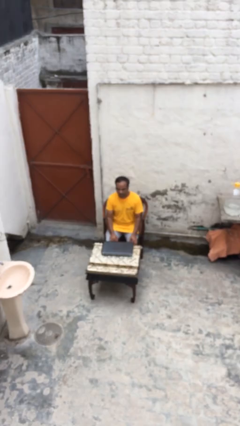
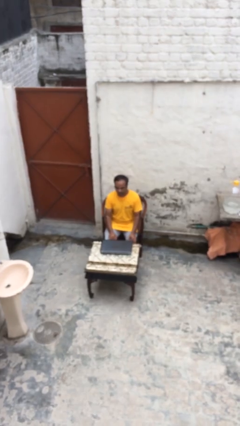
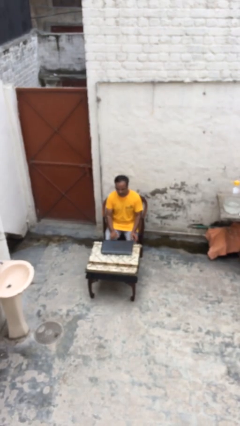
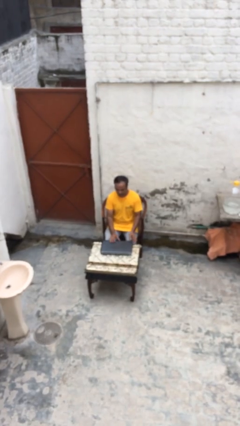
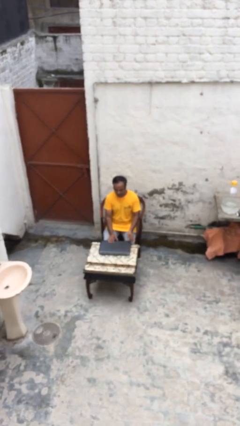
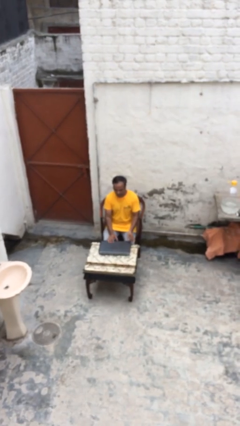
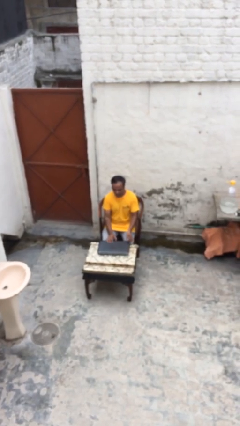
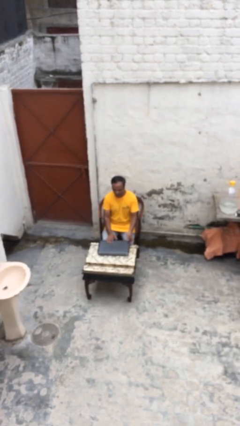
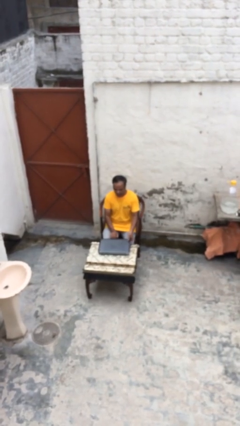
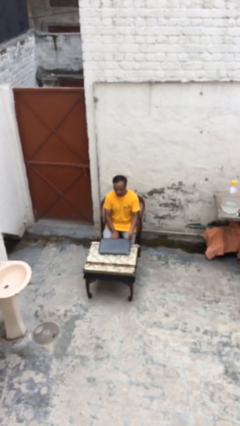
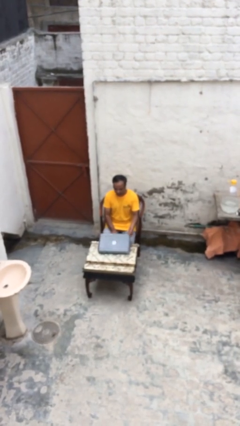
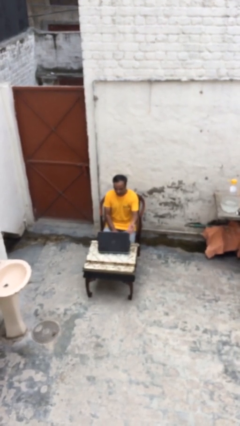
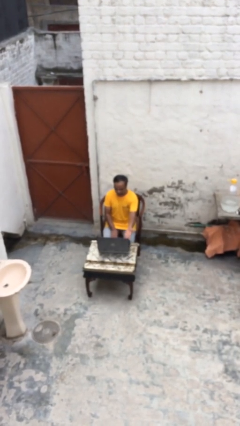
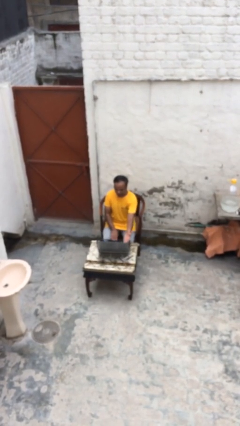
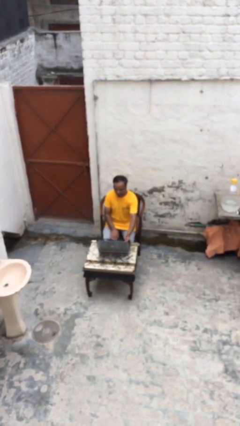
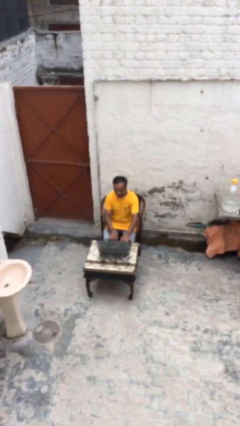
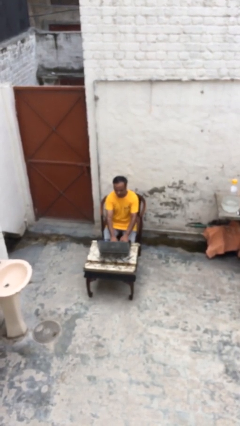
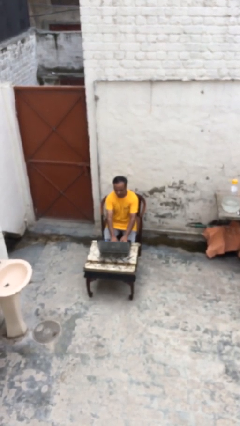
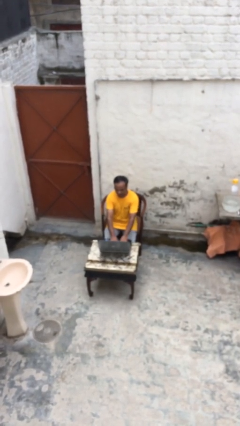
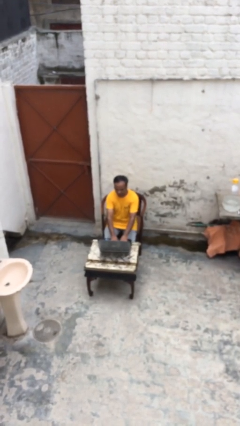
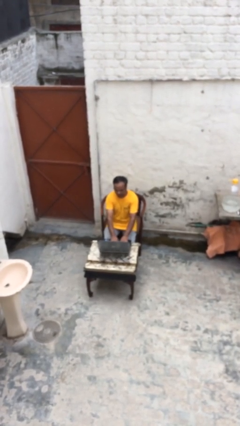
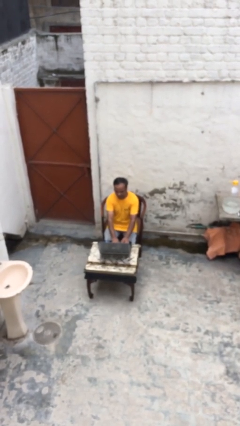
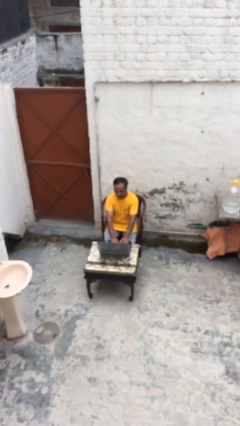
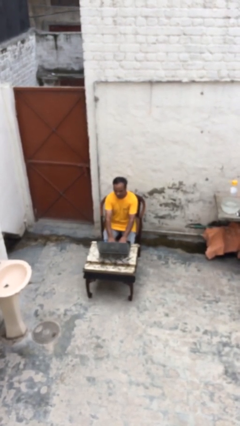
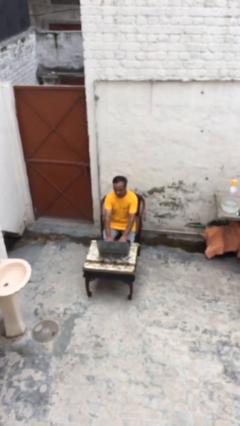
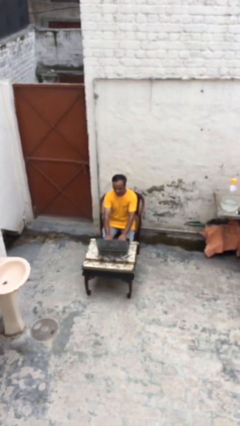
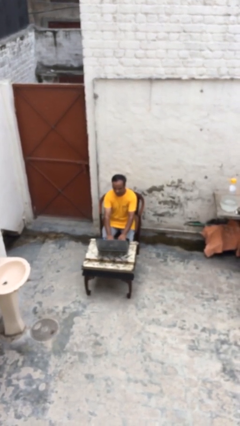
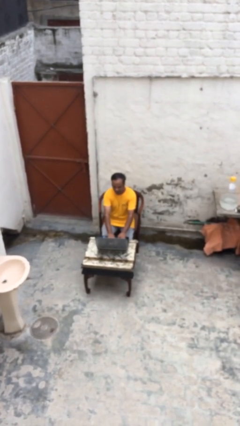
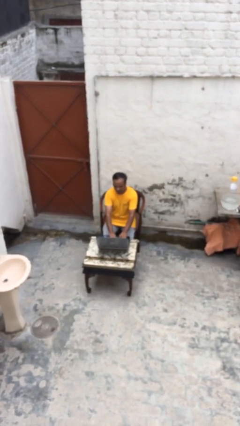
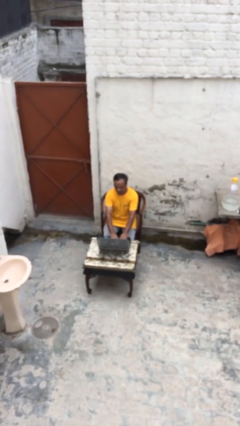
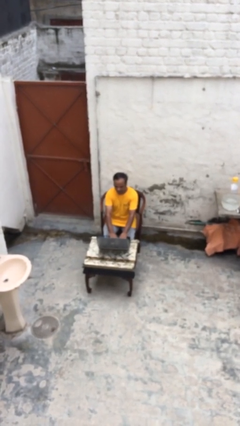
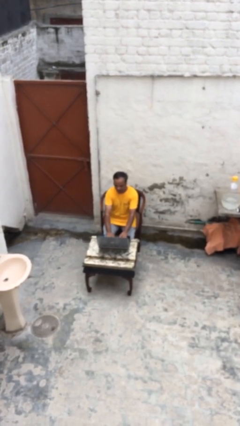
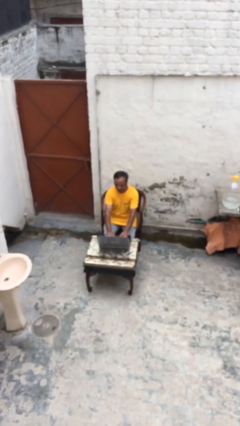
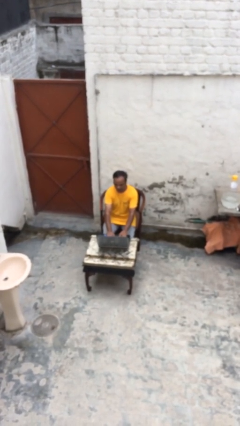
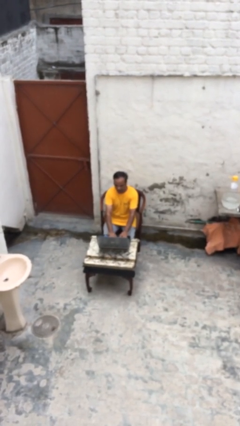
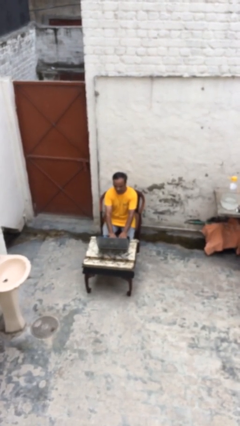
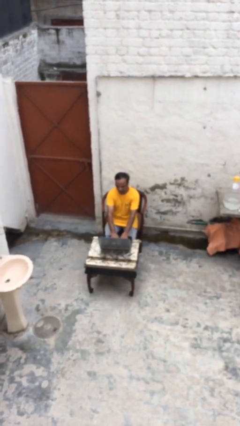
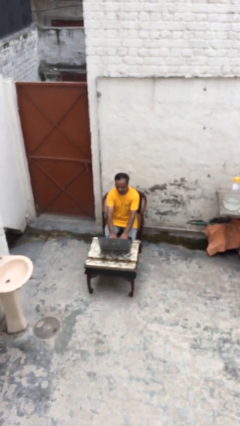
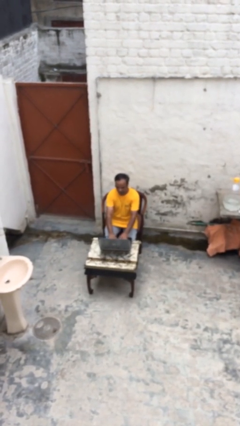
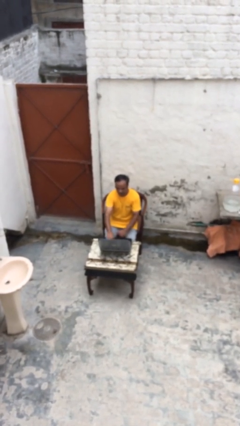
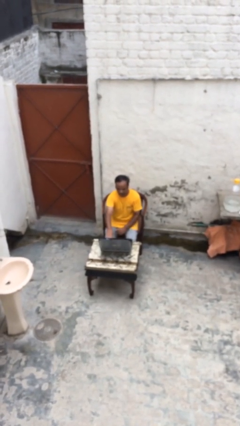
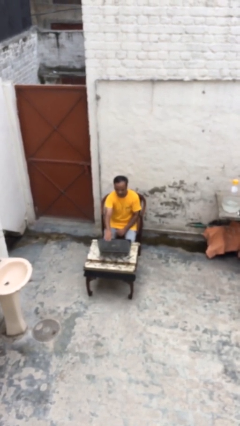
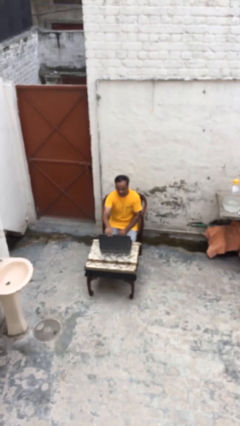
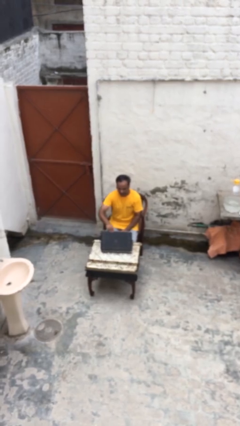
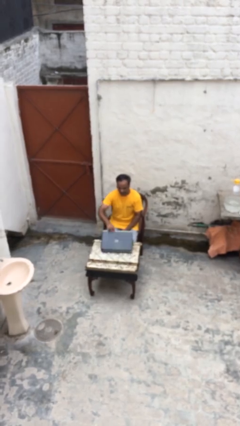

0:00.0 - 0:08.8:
person interacts with laptop

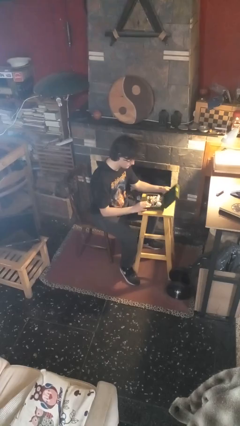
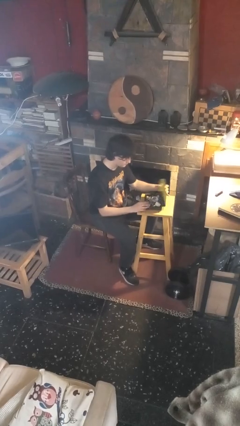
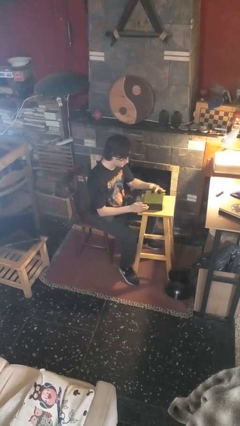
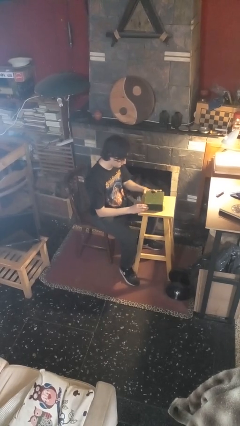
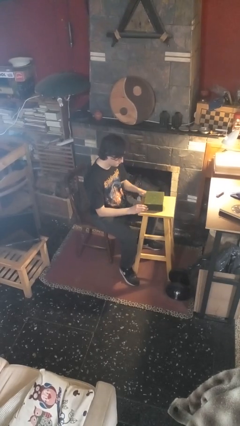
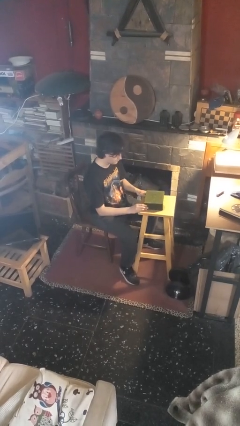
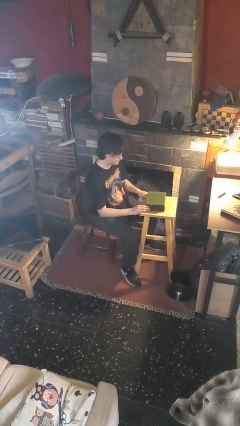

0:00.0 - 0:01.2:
person closes jewelry box

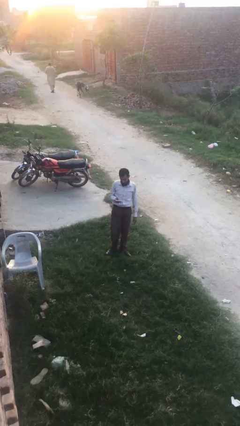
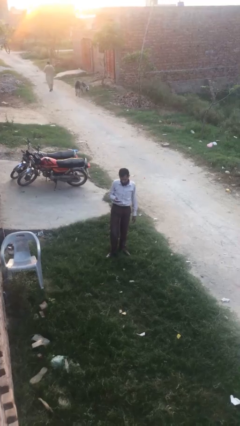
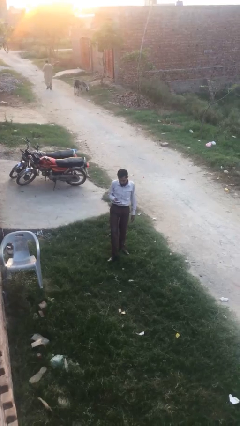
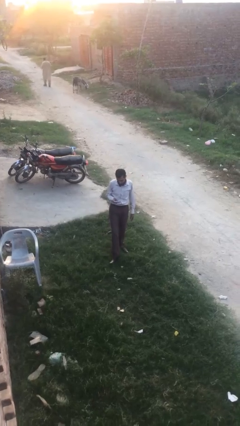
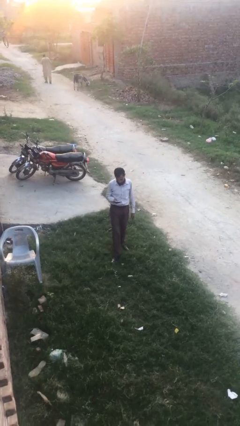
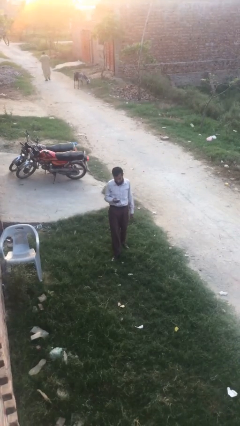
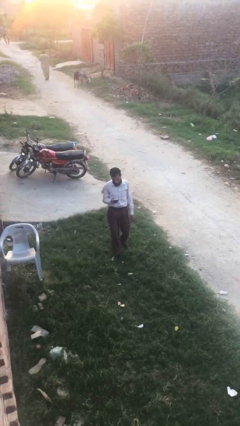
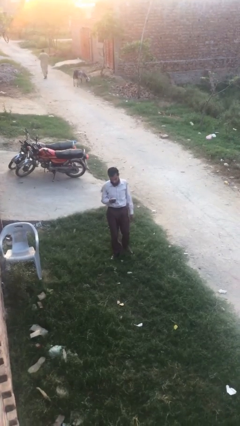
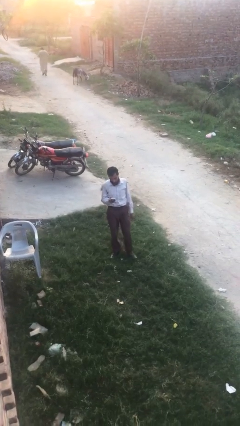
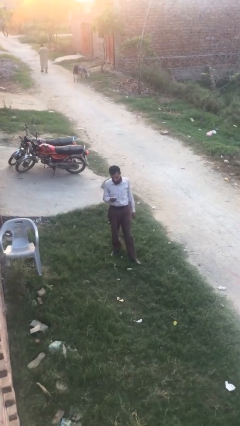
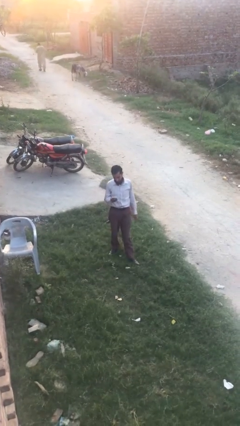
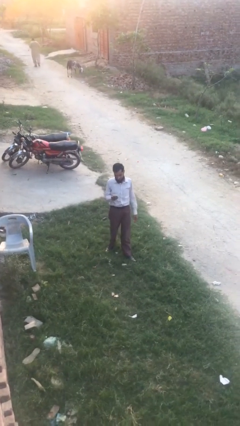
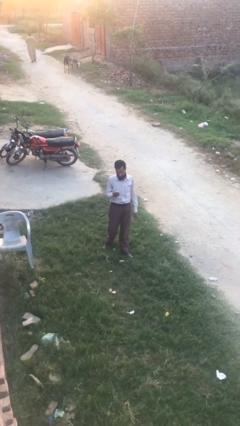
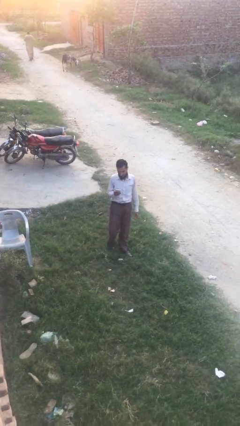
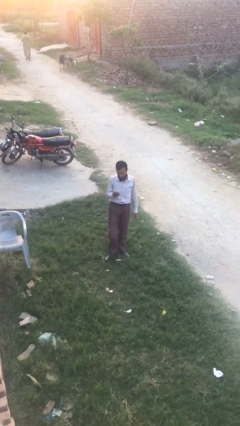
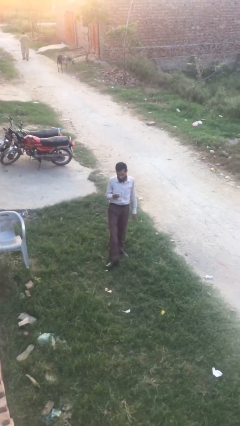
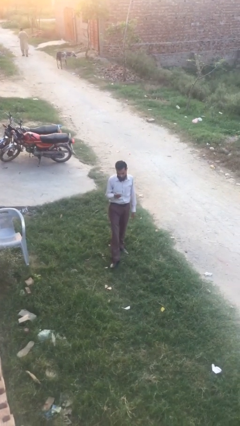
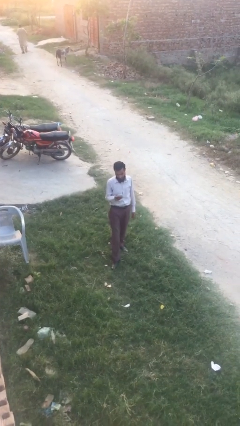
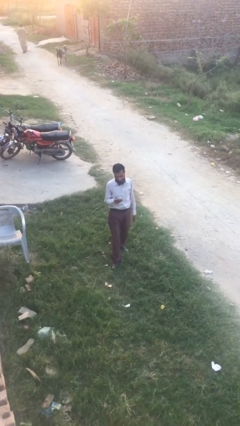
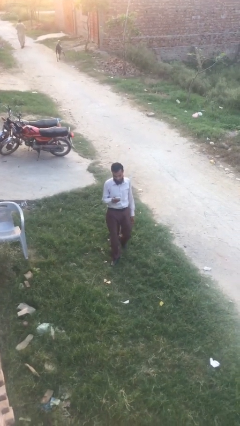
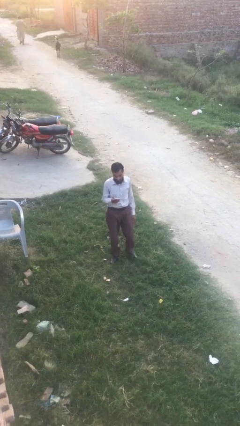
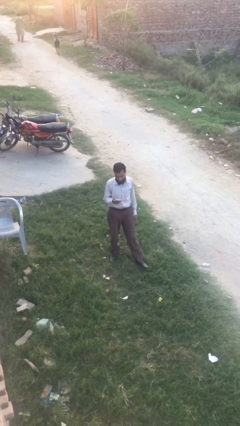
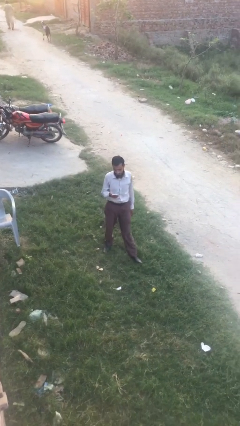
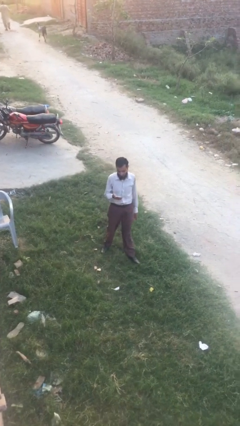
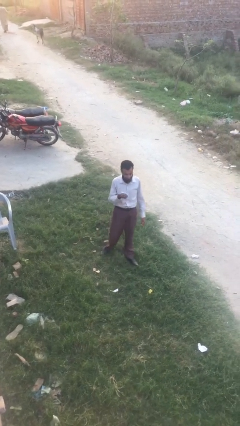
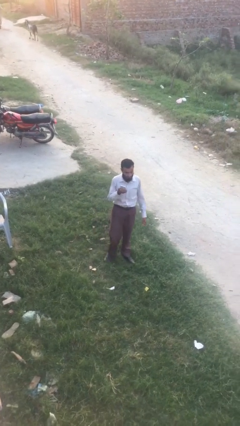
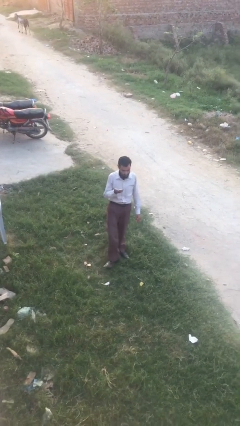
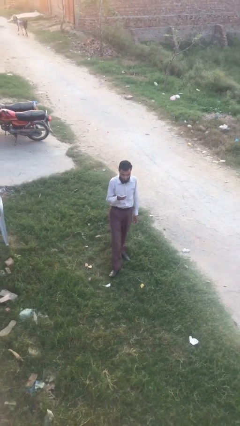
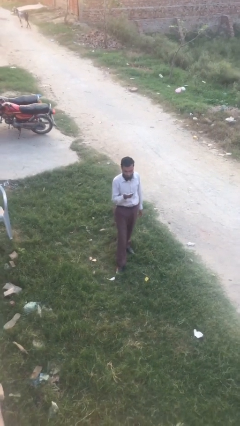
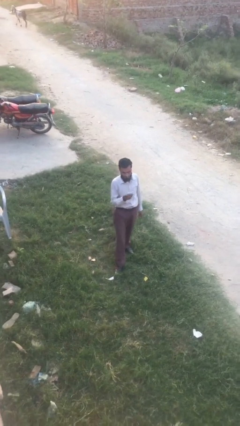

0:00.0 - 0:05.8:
person texts on phone

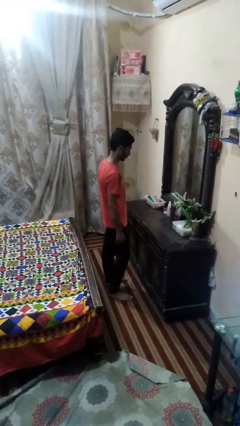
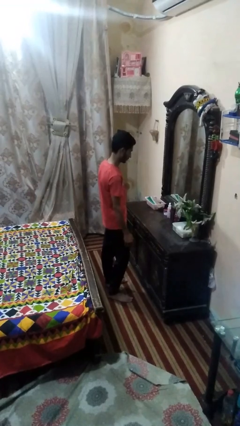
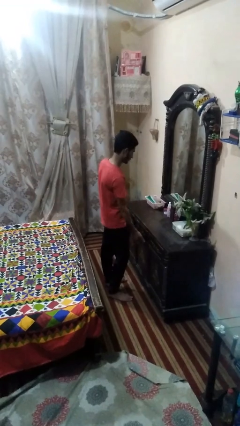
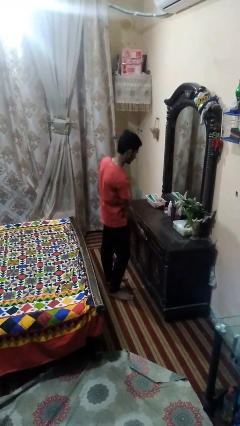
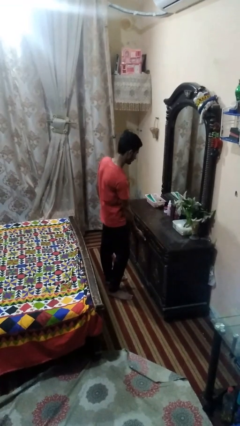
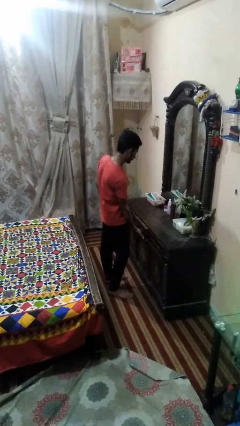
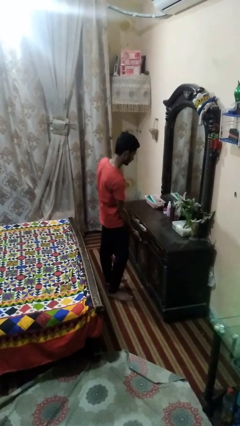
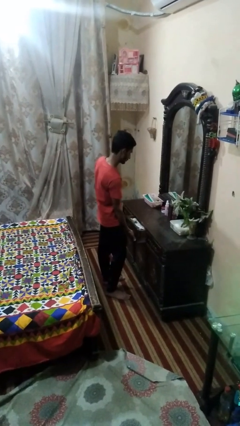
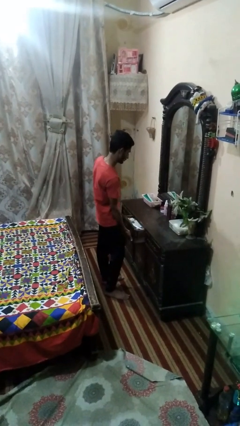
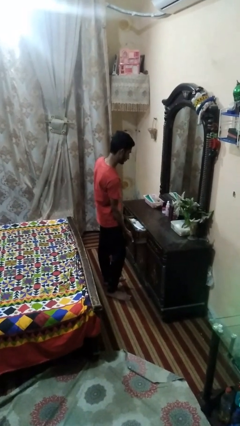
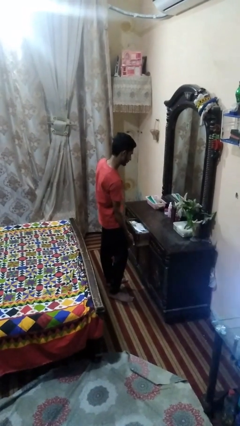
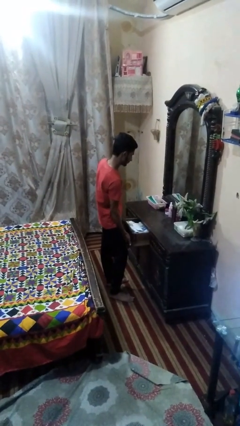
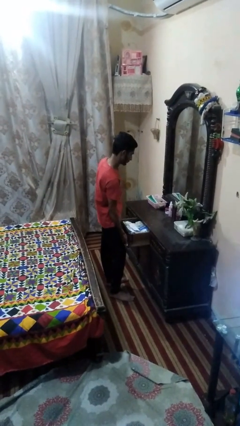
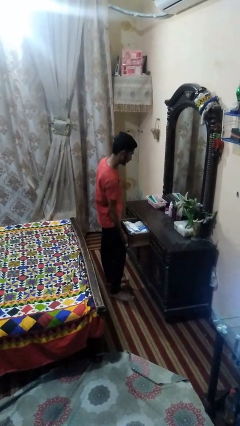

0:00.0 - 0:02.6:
person opens dresser drawer
